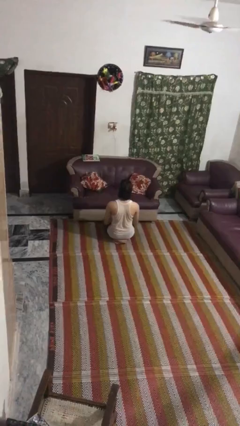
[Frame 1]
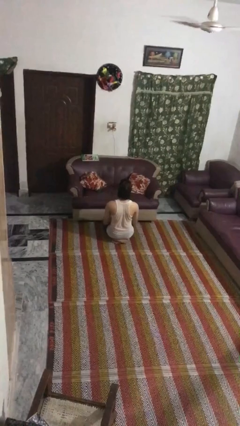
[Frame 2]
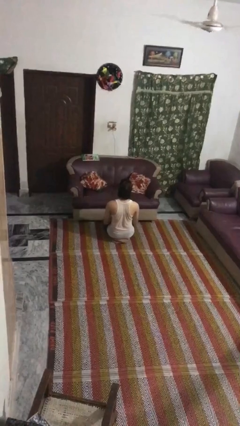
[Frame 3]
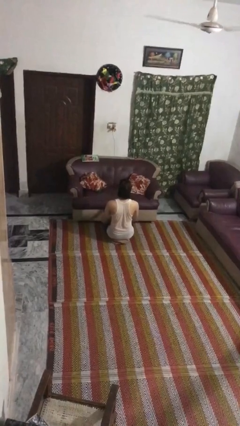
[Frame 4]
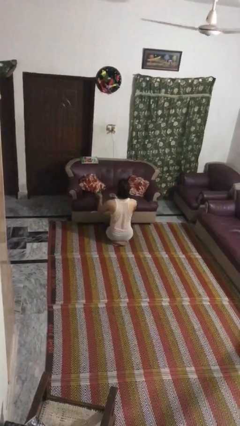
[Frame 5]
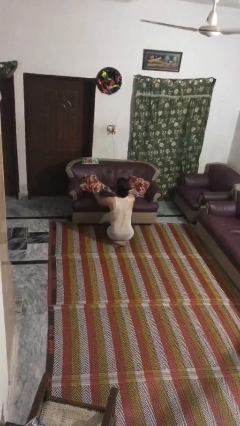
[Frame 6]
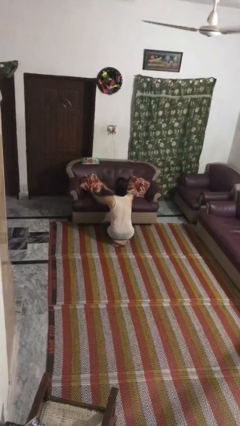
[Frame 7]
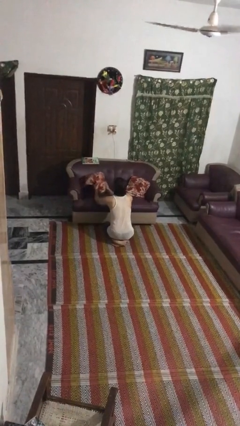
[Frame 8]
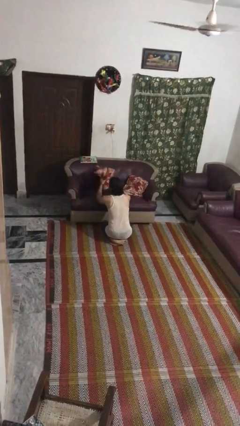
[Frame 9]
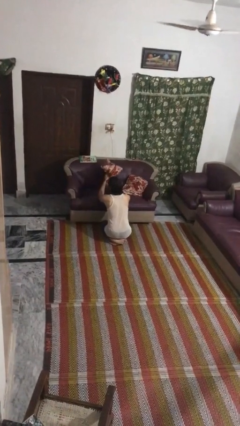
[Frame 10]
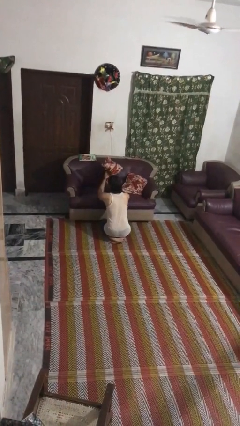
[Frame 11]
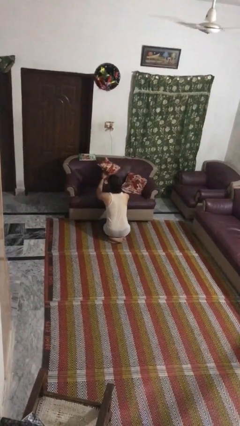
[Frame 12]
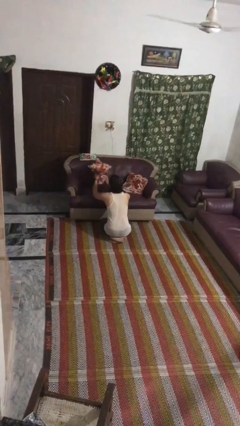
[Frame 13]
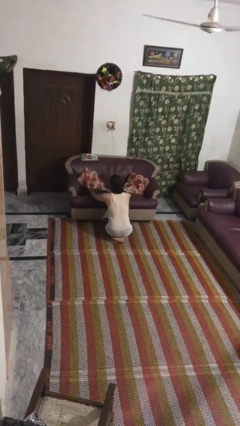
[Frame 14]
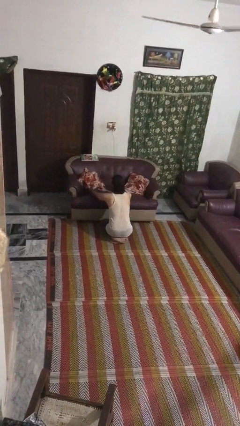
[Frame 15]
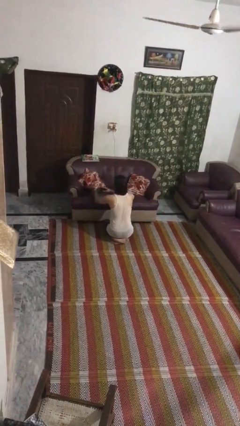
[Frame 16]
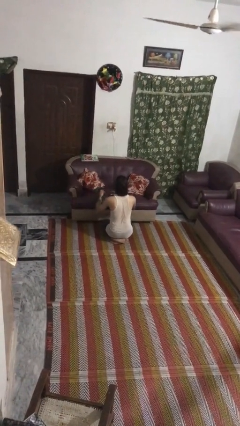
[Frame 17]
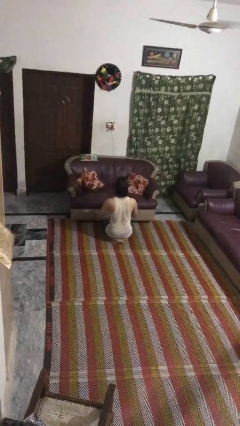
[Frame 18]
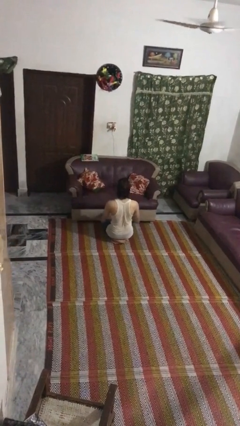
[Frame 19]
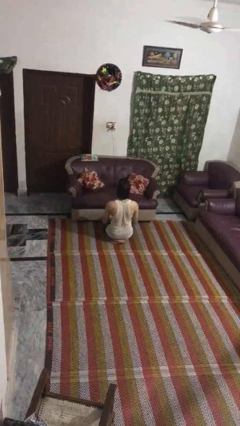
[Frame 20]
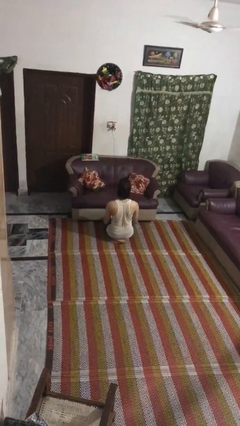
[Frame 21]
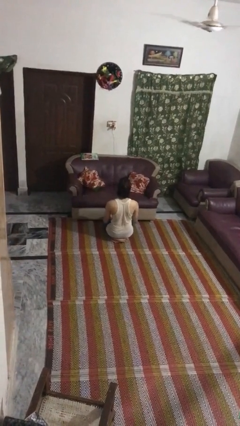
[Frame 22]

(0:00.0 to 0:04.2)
person searches in couch

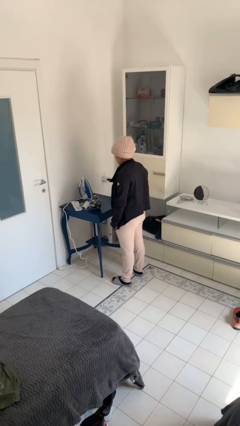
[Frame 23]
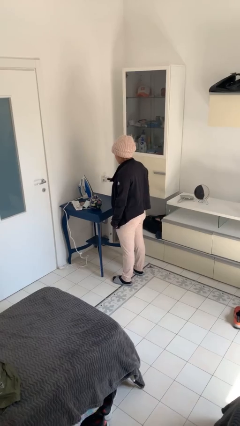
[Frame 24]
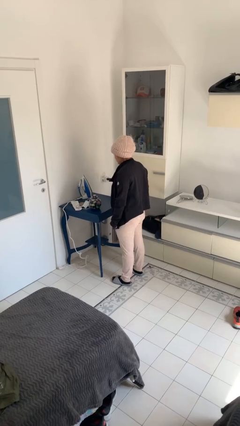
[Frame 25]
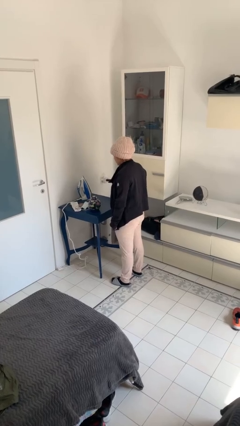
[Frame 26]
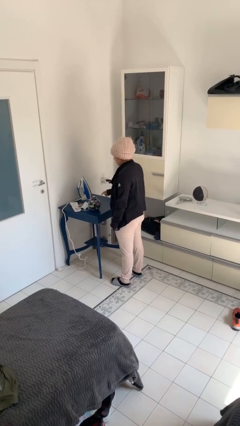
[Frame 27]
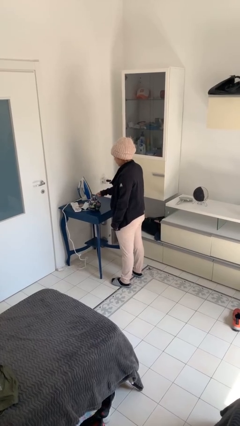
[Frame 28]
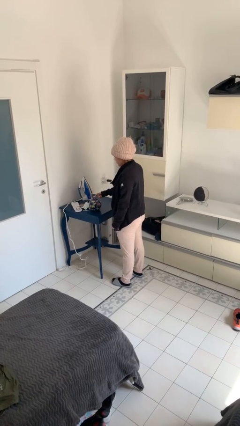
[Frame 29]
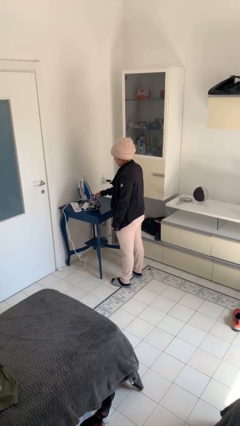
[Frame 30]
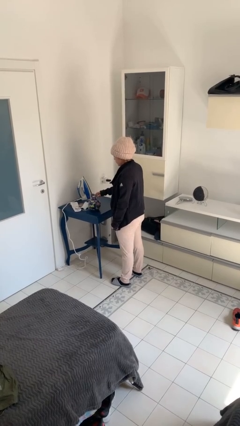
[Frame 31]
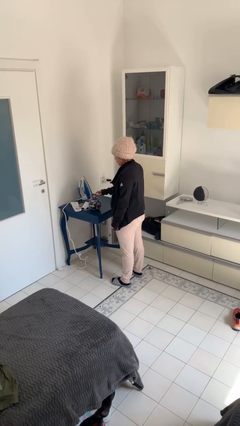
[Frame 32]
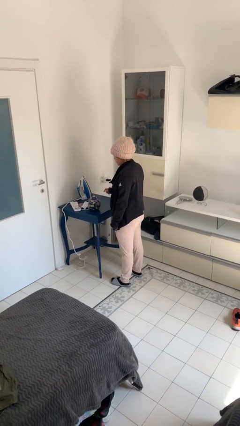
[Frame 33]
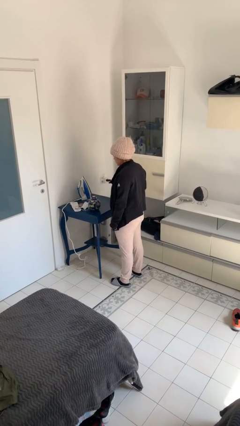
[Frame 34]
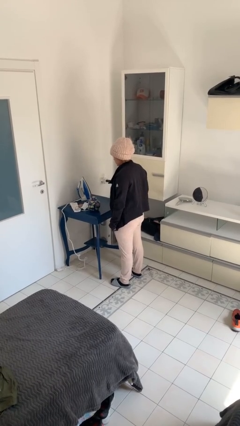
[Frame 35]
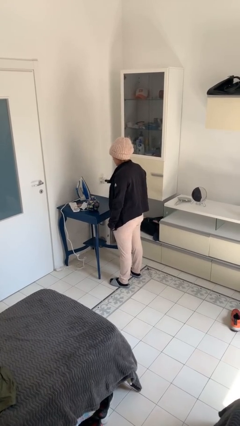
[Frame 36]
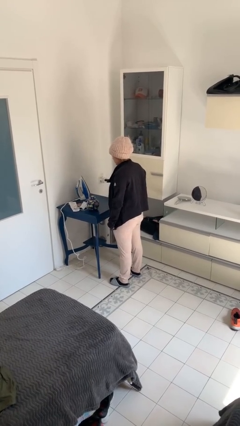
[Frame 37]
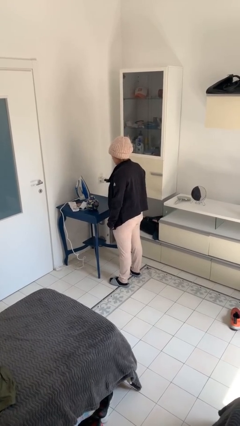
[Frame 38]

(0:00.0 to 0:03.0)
person taps object with finger

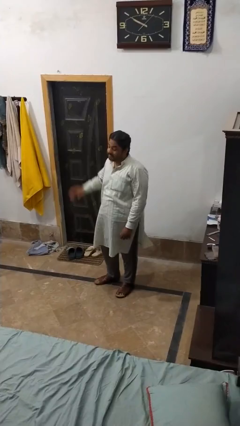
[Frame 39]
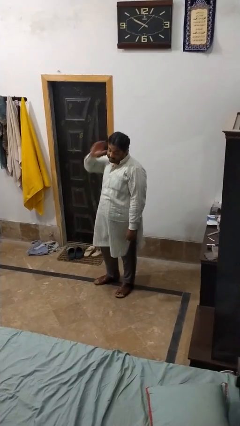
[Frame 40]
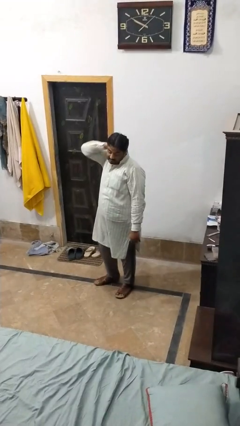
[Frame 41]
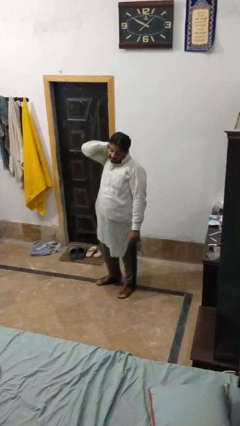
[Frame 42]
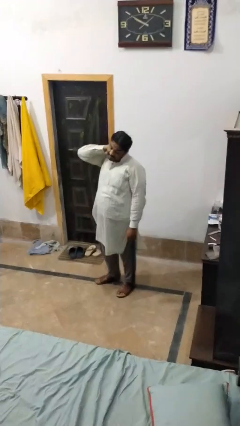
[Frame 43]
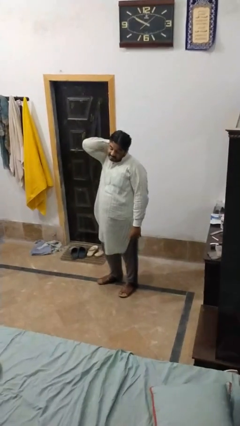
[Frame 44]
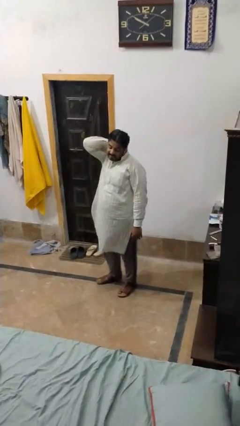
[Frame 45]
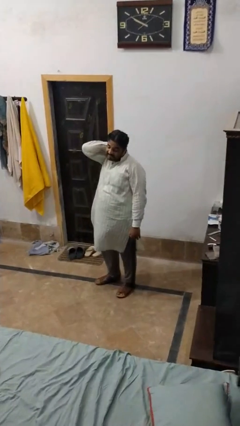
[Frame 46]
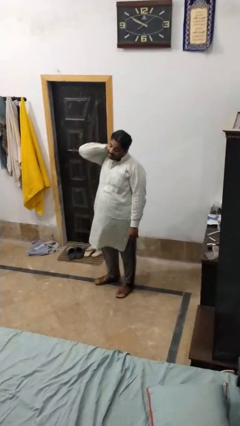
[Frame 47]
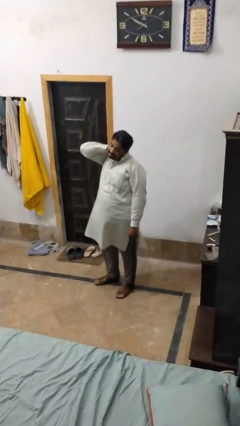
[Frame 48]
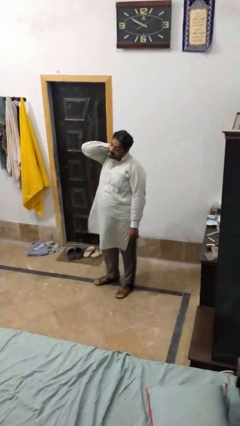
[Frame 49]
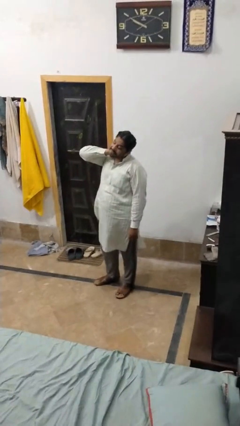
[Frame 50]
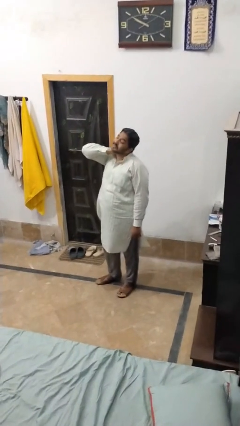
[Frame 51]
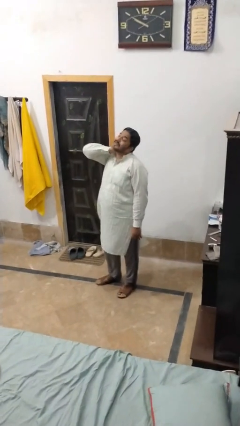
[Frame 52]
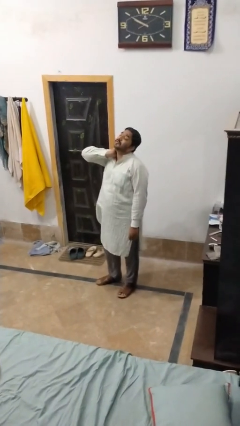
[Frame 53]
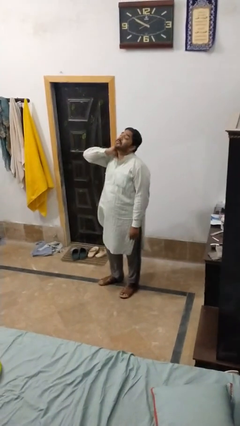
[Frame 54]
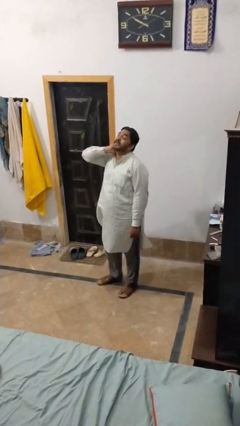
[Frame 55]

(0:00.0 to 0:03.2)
person rubs neck

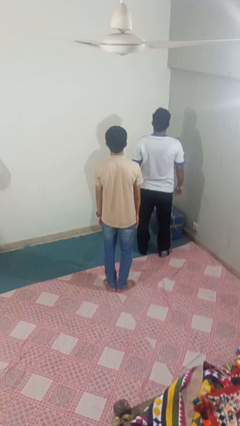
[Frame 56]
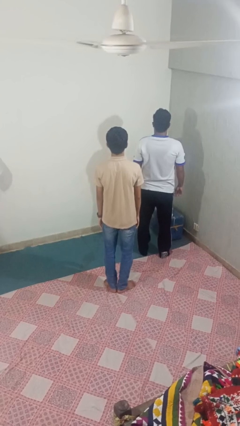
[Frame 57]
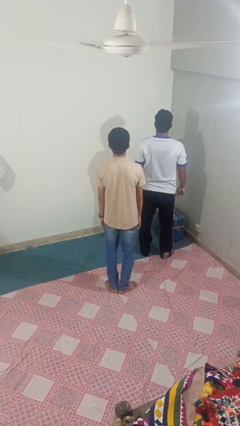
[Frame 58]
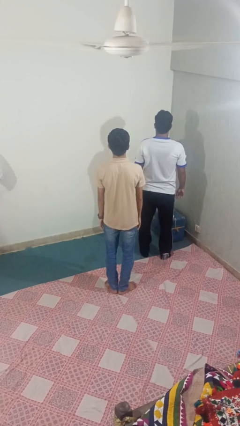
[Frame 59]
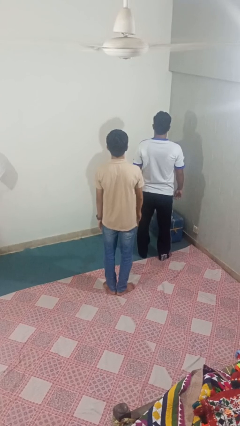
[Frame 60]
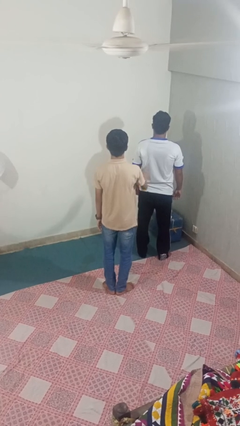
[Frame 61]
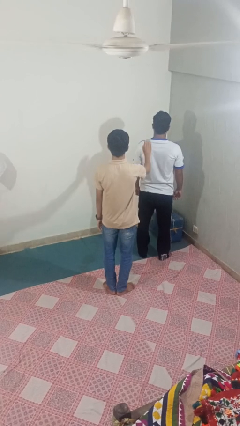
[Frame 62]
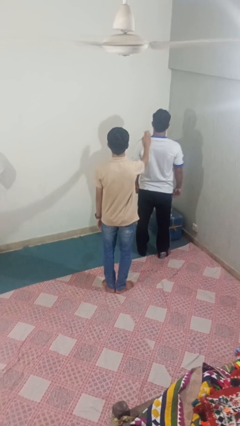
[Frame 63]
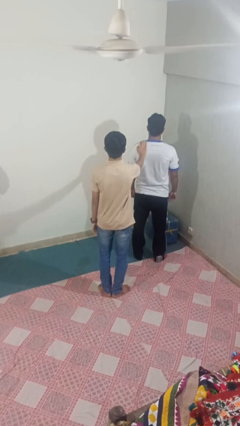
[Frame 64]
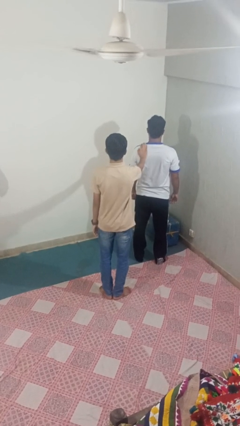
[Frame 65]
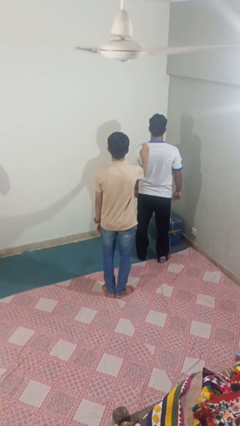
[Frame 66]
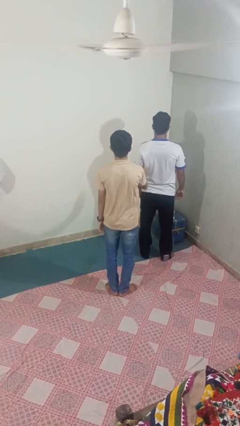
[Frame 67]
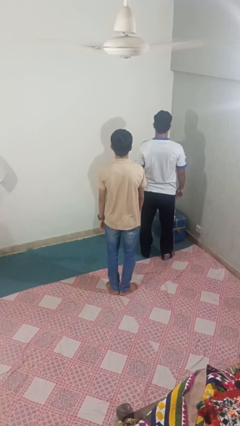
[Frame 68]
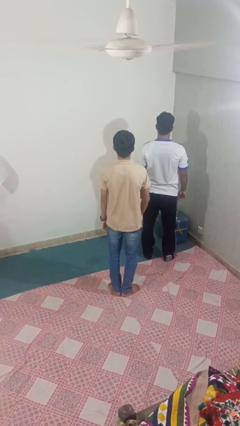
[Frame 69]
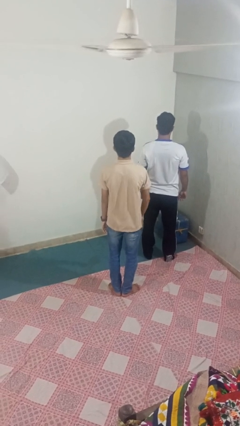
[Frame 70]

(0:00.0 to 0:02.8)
person touches back of person

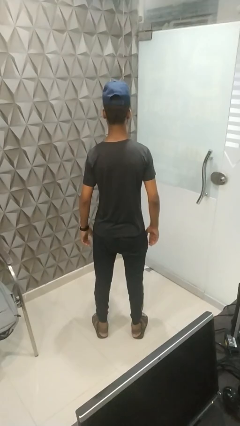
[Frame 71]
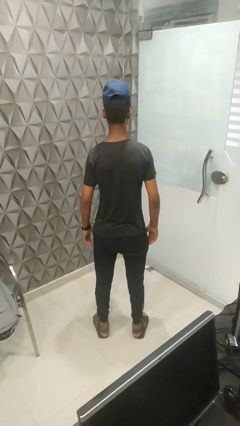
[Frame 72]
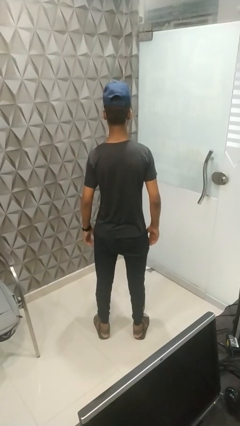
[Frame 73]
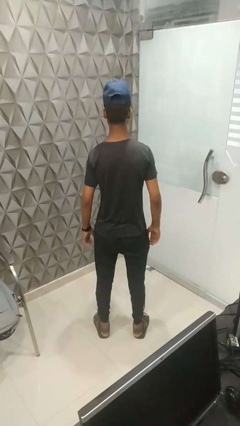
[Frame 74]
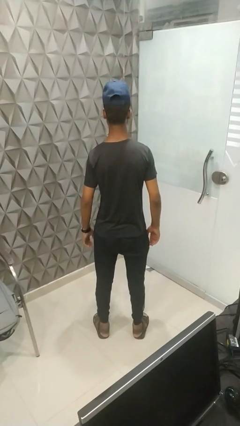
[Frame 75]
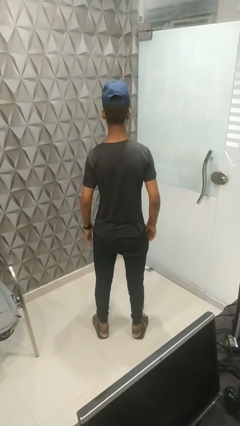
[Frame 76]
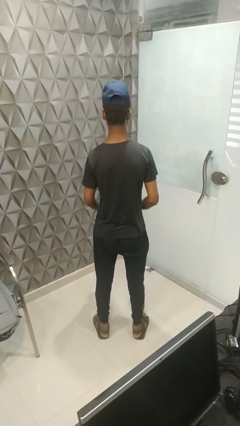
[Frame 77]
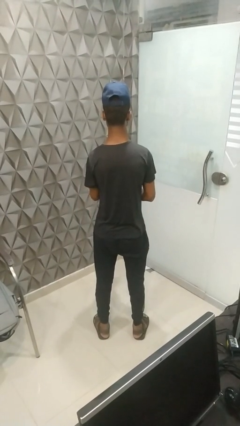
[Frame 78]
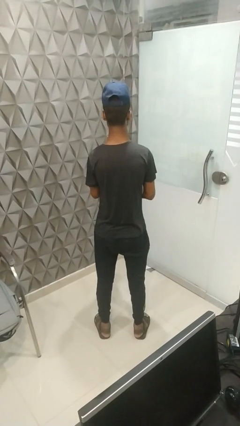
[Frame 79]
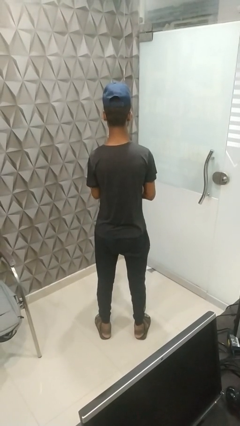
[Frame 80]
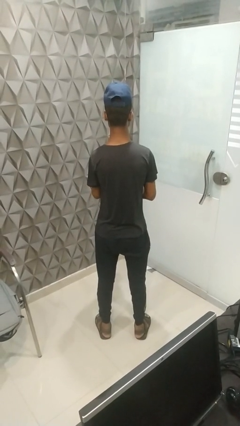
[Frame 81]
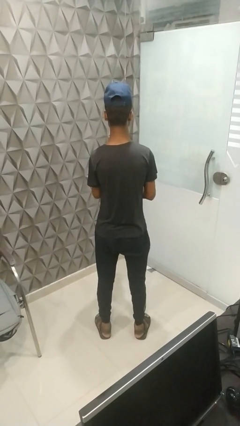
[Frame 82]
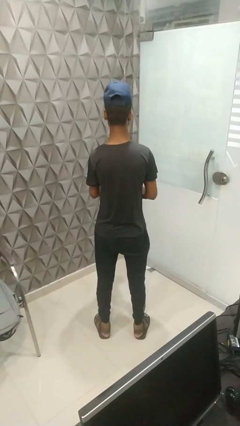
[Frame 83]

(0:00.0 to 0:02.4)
person claps hands

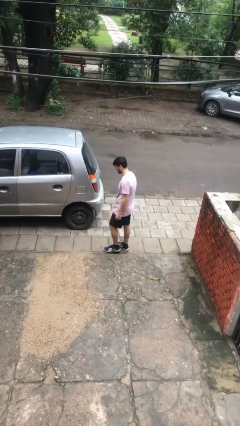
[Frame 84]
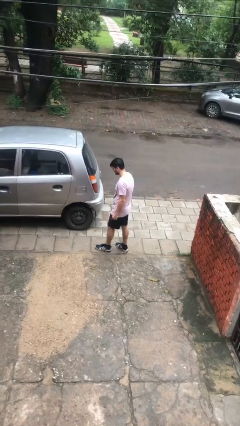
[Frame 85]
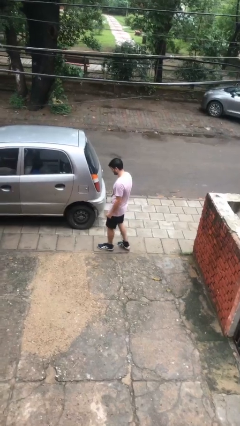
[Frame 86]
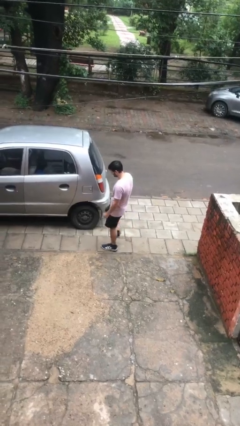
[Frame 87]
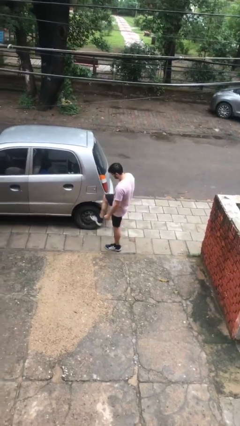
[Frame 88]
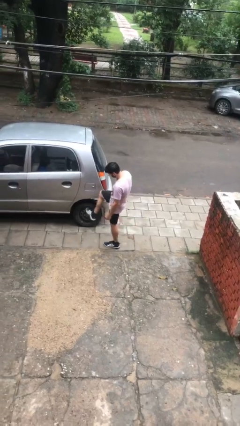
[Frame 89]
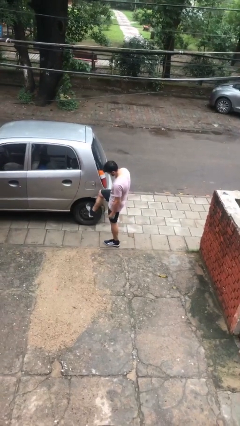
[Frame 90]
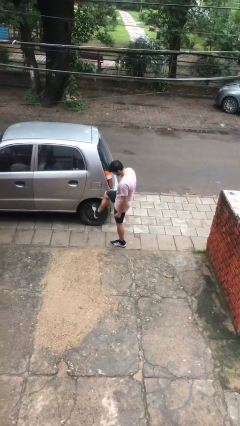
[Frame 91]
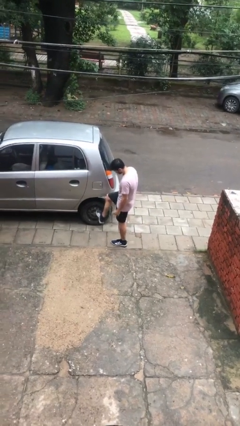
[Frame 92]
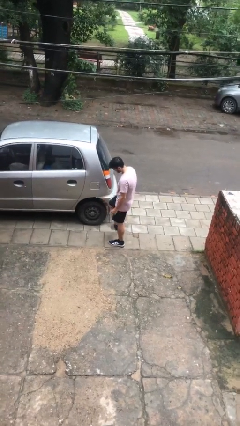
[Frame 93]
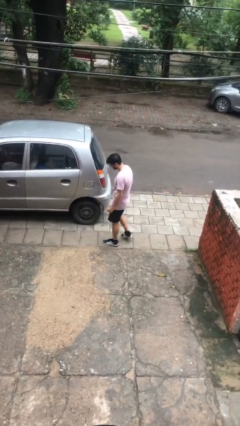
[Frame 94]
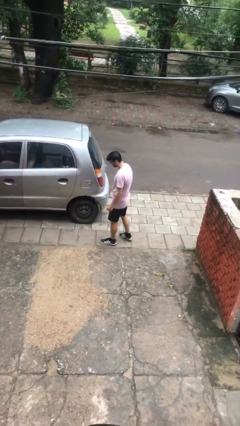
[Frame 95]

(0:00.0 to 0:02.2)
person kicks car tires
